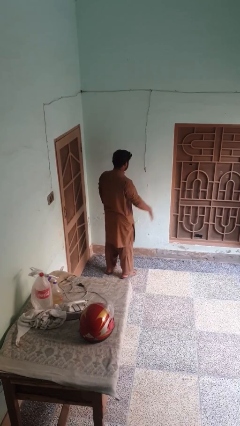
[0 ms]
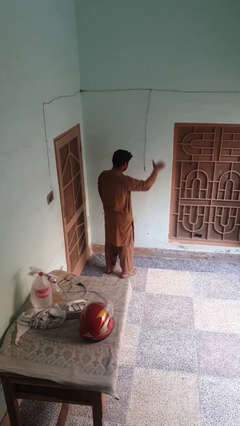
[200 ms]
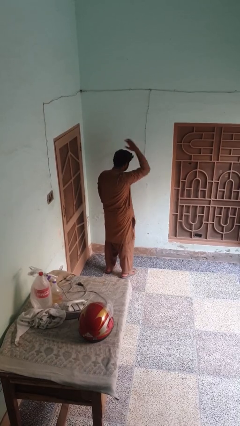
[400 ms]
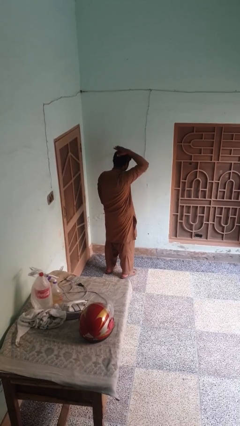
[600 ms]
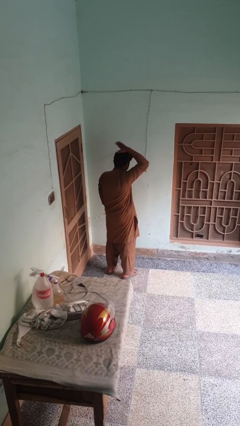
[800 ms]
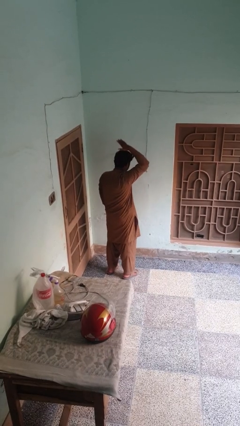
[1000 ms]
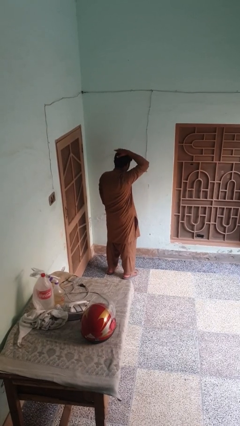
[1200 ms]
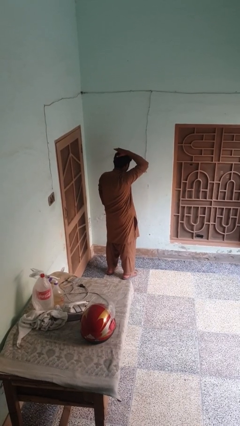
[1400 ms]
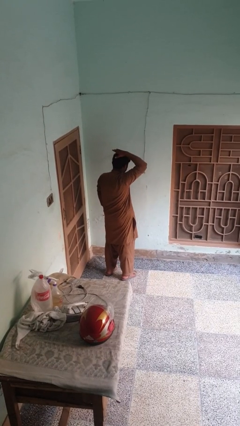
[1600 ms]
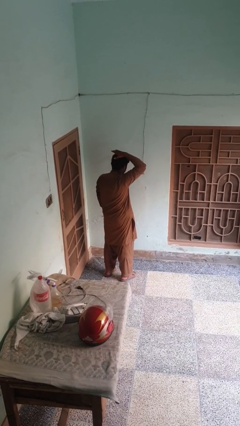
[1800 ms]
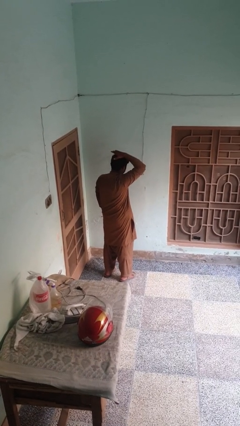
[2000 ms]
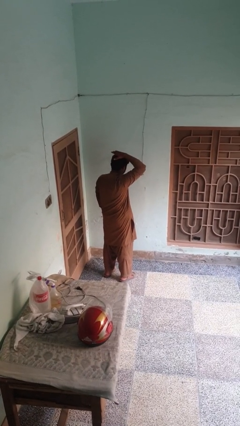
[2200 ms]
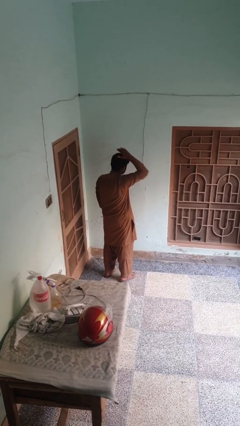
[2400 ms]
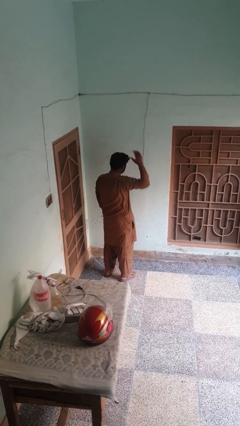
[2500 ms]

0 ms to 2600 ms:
person pats head

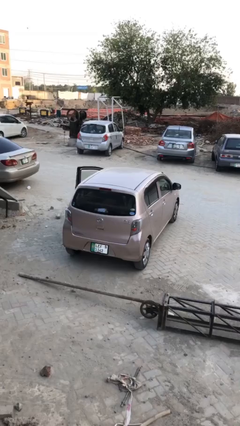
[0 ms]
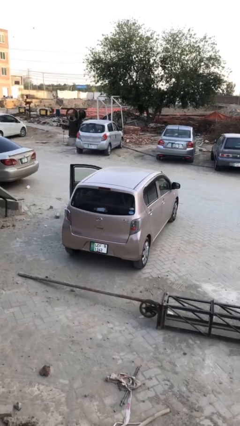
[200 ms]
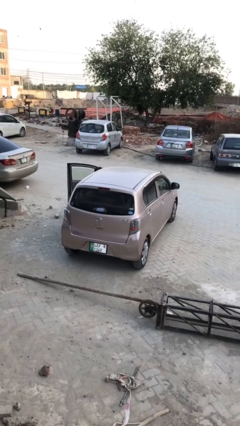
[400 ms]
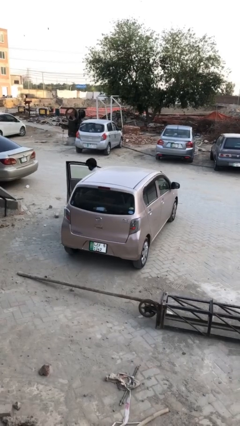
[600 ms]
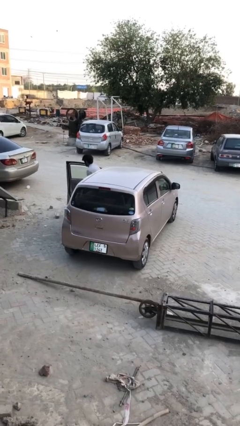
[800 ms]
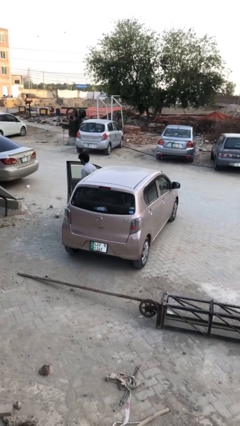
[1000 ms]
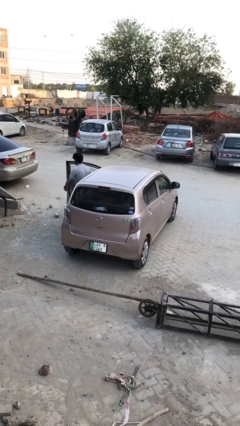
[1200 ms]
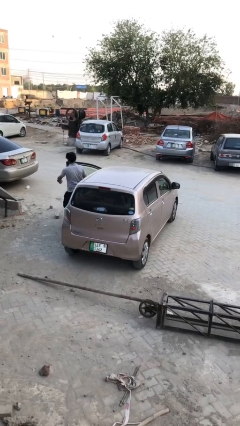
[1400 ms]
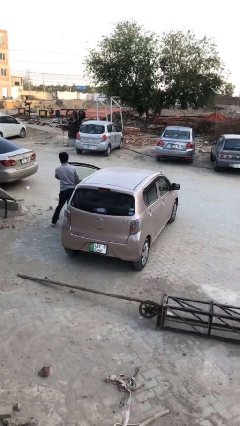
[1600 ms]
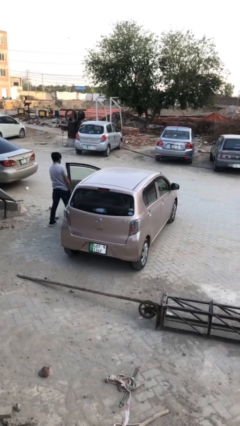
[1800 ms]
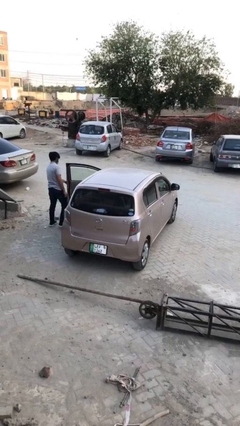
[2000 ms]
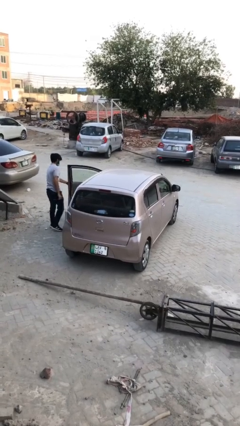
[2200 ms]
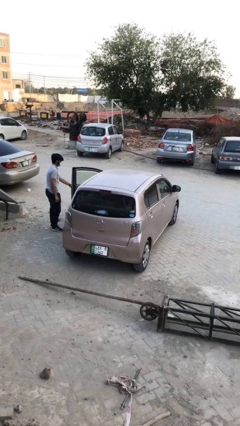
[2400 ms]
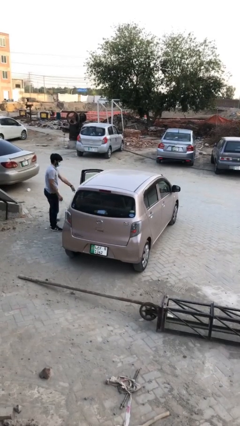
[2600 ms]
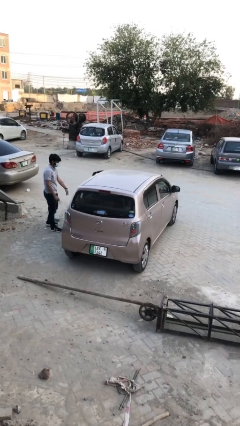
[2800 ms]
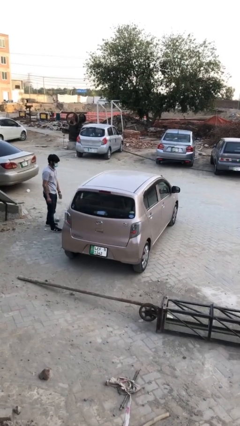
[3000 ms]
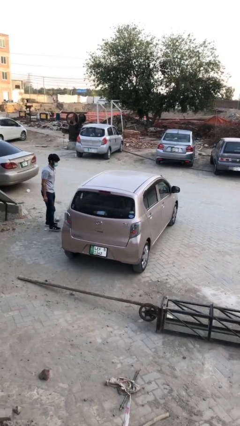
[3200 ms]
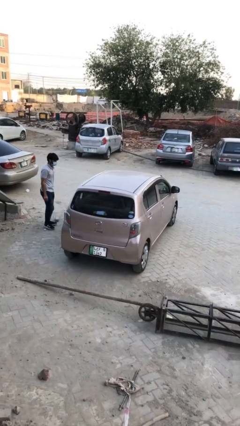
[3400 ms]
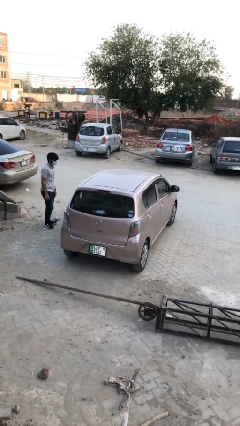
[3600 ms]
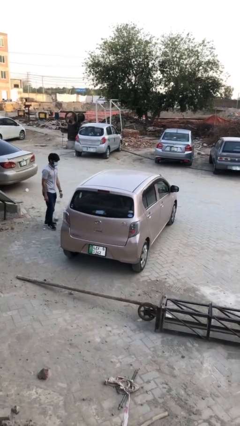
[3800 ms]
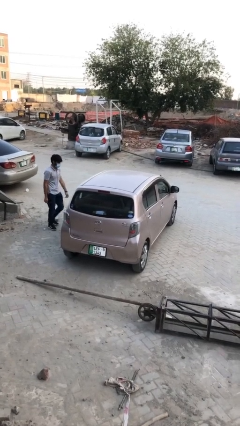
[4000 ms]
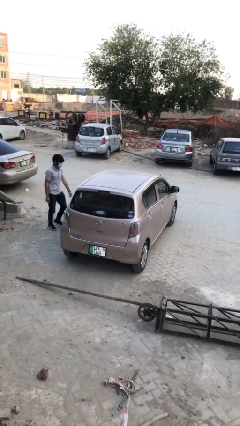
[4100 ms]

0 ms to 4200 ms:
car drops off person

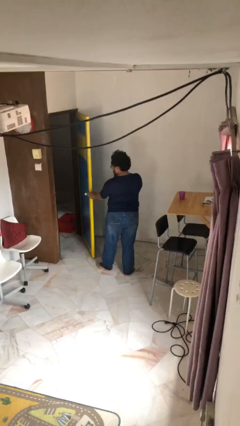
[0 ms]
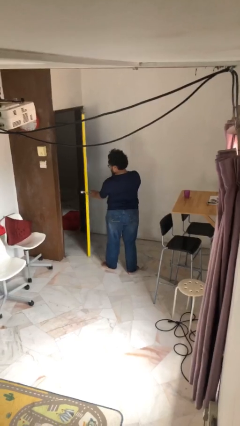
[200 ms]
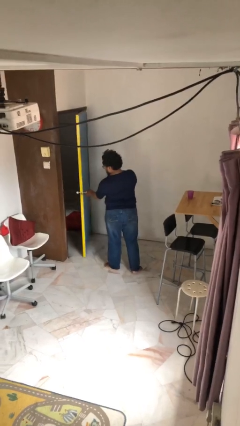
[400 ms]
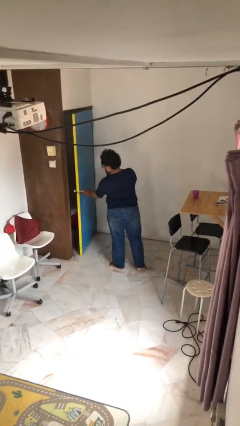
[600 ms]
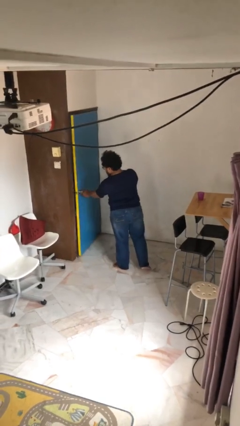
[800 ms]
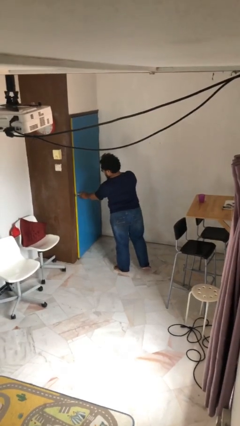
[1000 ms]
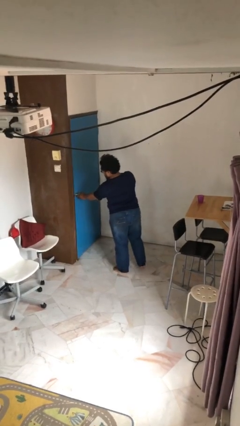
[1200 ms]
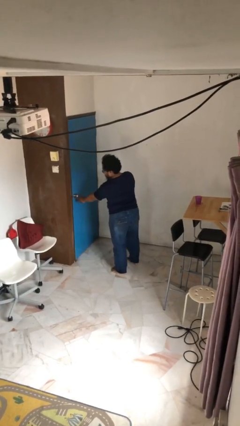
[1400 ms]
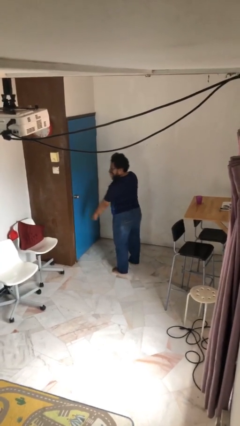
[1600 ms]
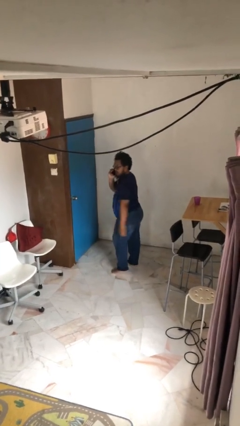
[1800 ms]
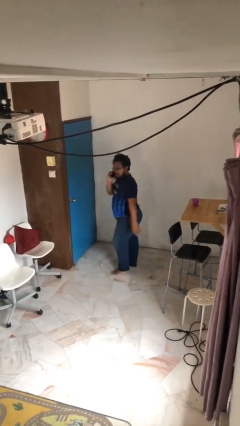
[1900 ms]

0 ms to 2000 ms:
person closes facility door

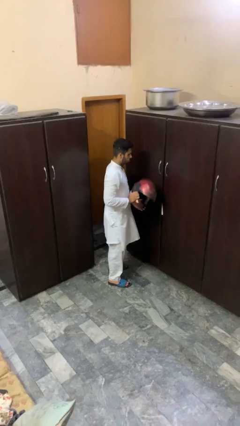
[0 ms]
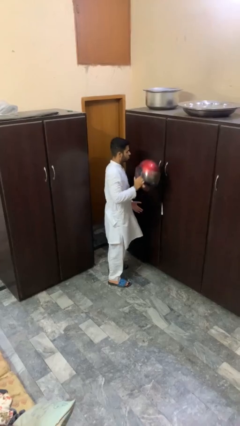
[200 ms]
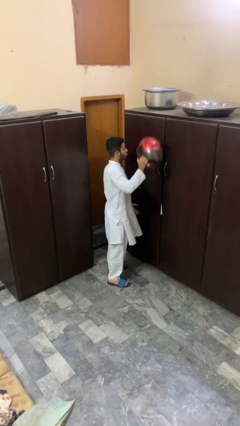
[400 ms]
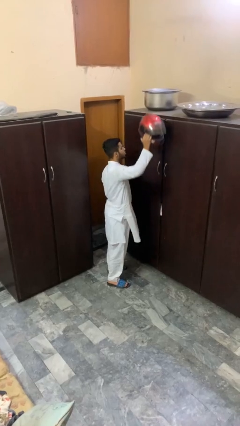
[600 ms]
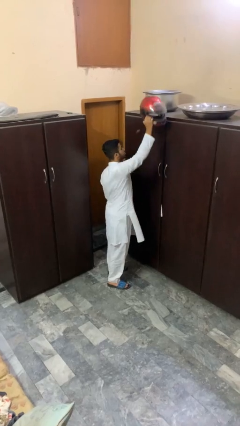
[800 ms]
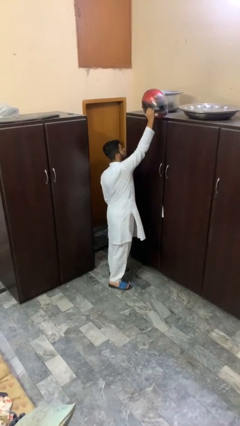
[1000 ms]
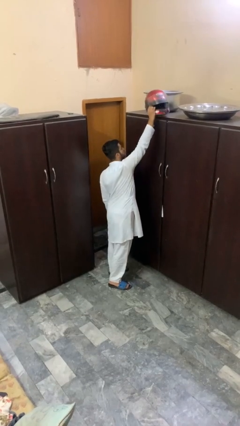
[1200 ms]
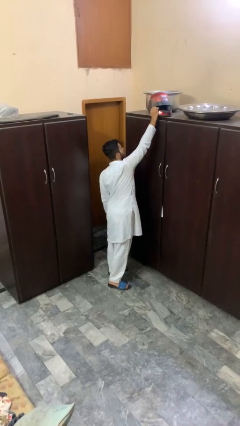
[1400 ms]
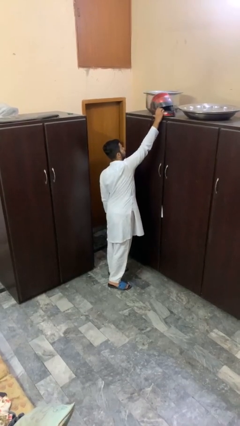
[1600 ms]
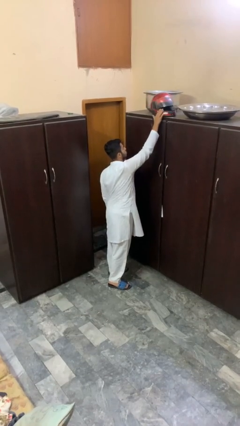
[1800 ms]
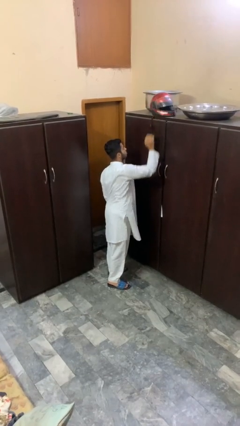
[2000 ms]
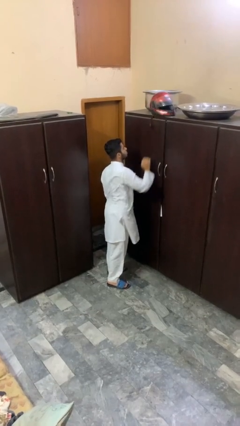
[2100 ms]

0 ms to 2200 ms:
person puts down object on shelf

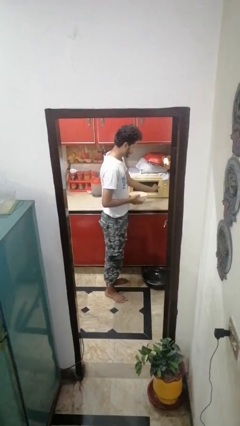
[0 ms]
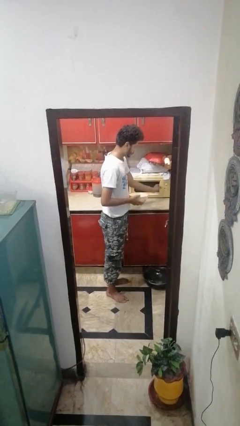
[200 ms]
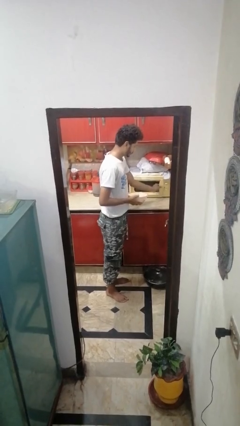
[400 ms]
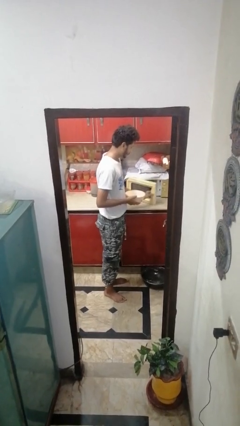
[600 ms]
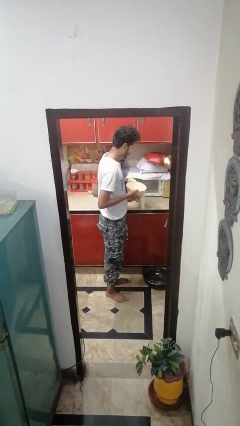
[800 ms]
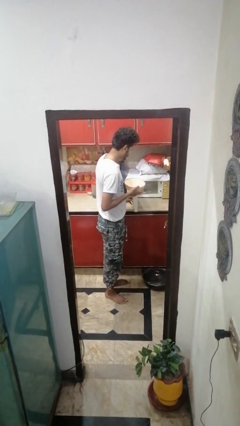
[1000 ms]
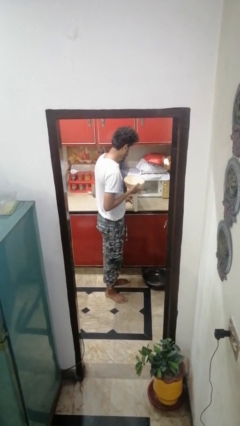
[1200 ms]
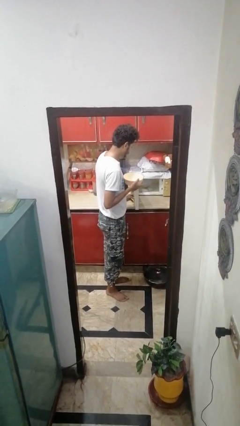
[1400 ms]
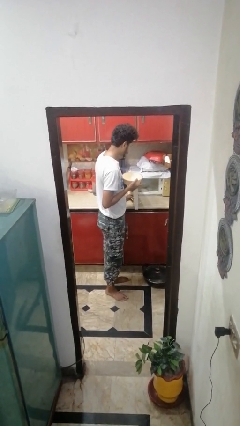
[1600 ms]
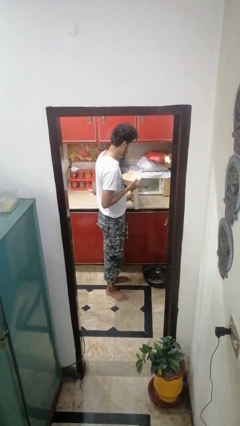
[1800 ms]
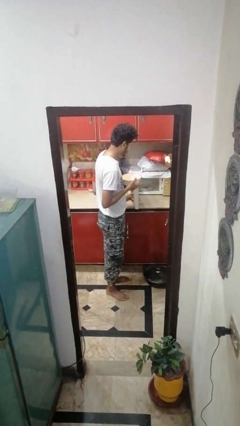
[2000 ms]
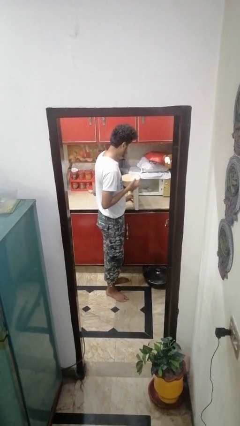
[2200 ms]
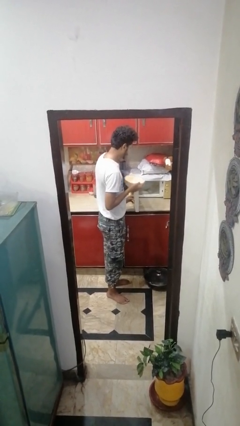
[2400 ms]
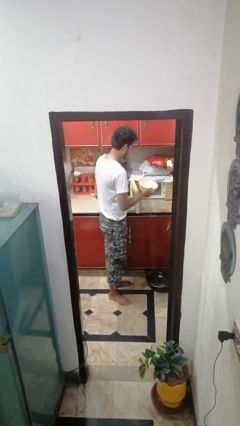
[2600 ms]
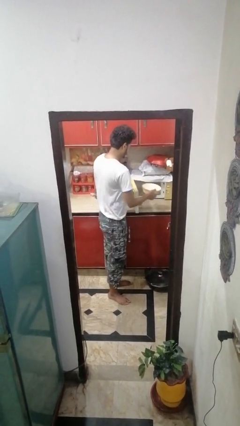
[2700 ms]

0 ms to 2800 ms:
person opens microwave

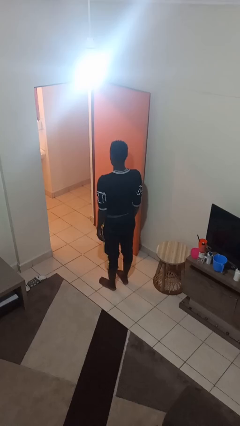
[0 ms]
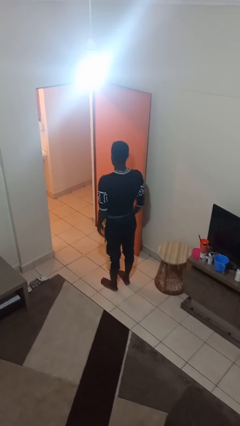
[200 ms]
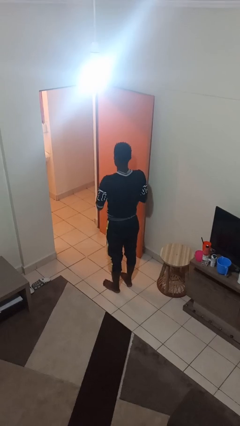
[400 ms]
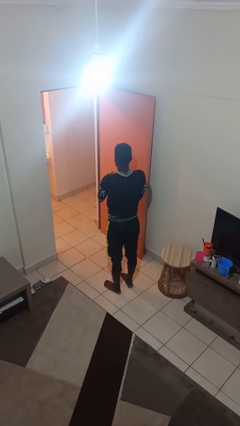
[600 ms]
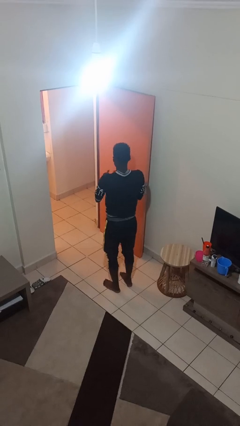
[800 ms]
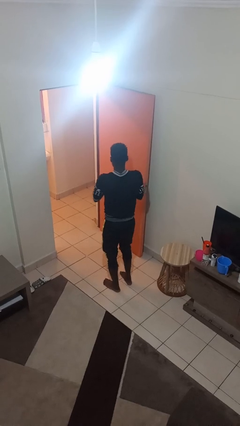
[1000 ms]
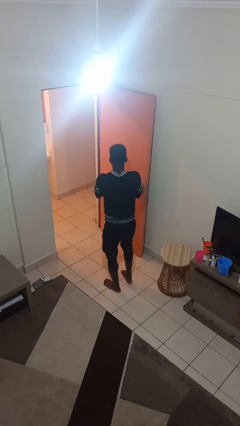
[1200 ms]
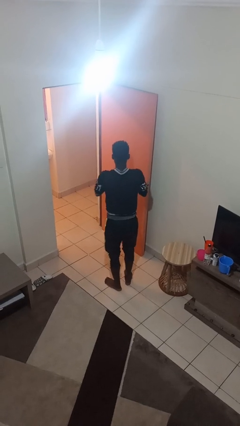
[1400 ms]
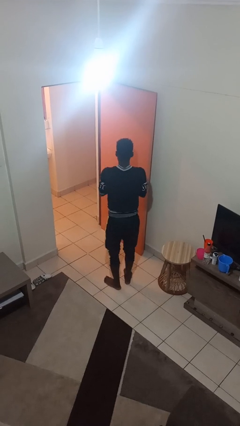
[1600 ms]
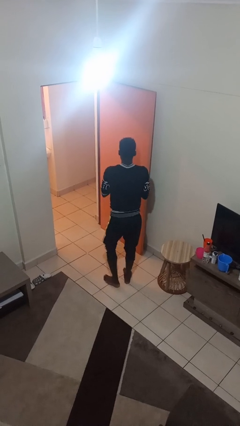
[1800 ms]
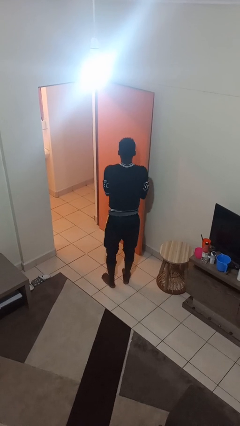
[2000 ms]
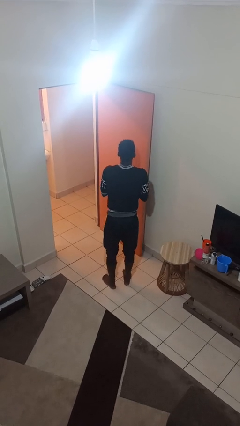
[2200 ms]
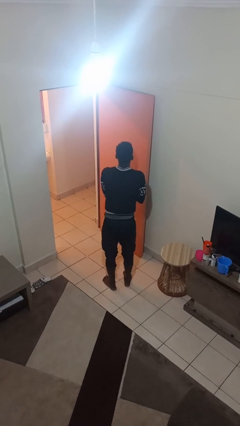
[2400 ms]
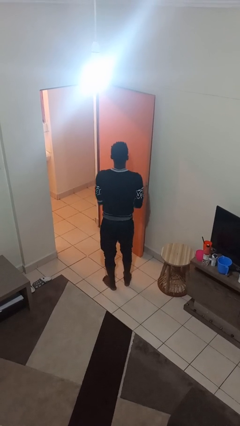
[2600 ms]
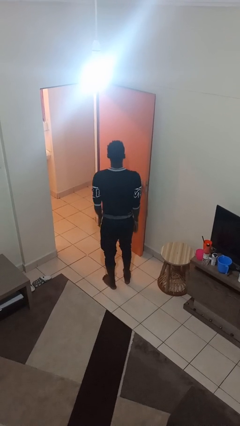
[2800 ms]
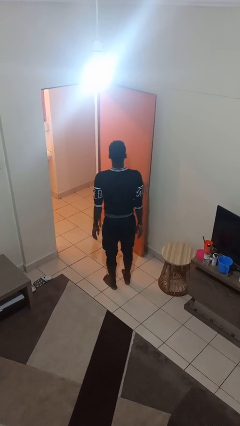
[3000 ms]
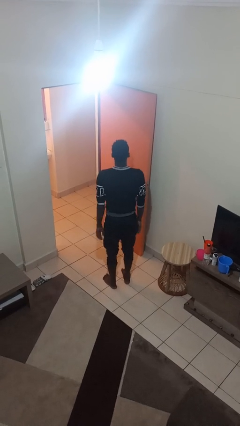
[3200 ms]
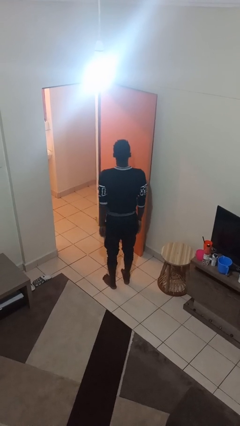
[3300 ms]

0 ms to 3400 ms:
person claps hands
